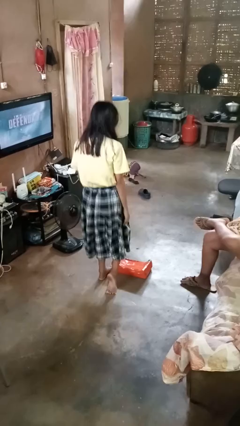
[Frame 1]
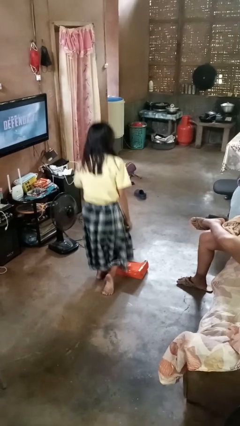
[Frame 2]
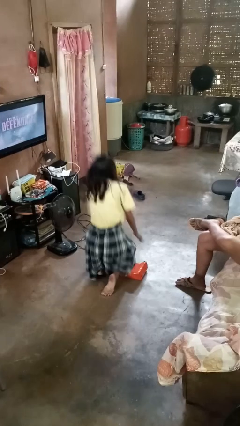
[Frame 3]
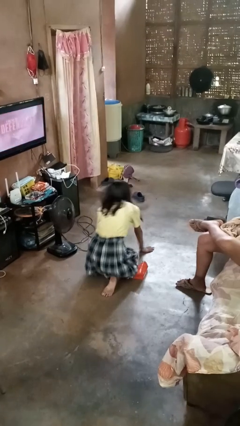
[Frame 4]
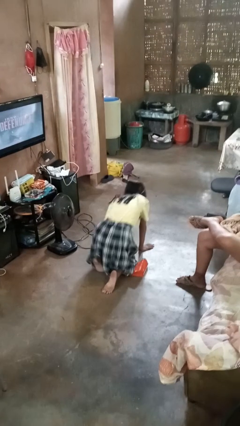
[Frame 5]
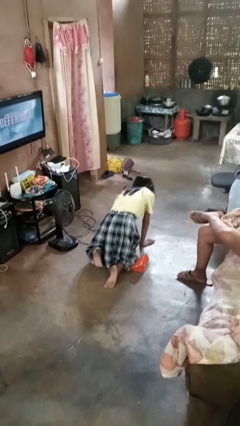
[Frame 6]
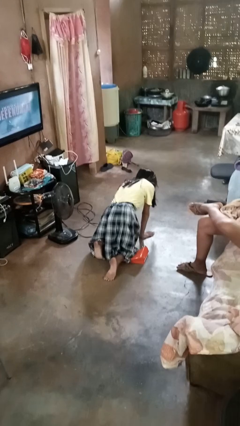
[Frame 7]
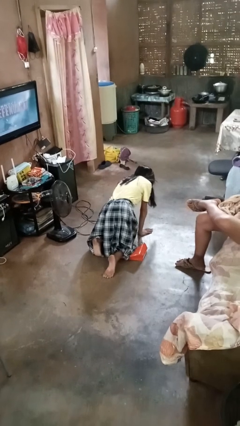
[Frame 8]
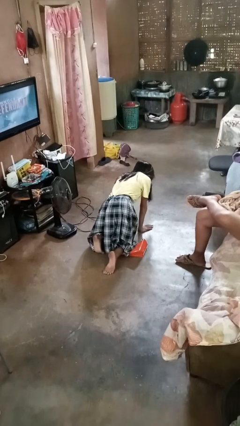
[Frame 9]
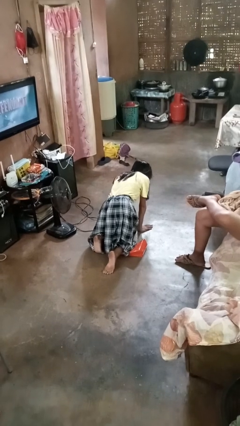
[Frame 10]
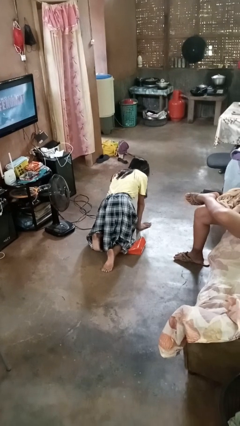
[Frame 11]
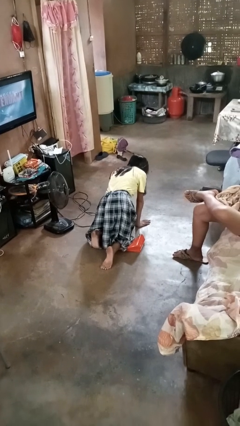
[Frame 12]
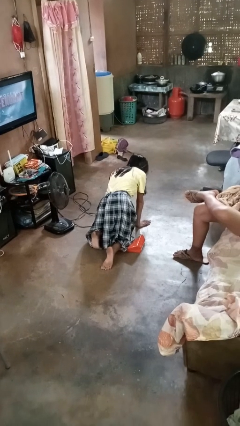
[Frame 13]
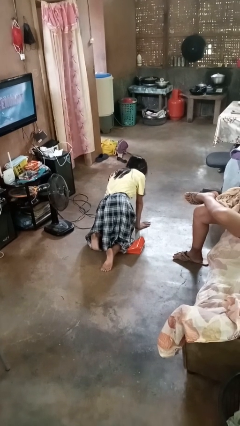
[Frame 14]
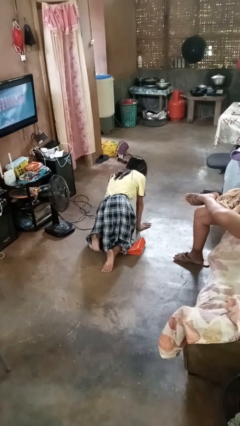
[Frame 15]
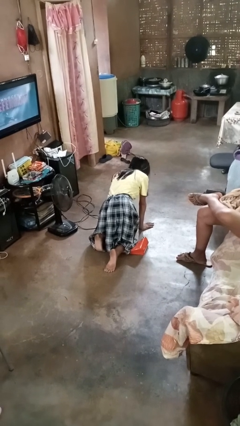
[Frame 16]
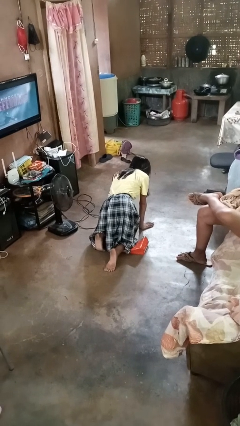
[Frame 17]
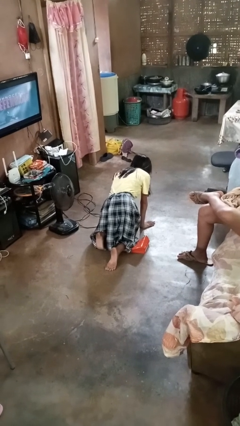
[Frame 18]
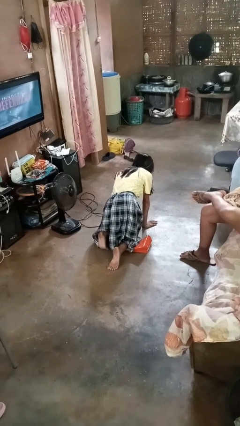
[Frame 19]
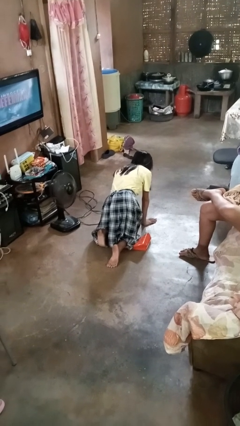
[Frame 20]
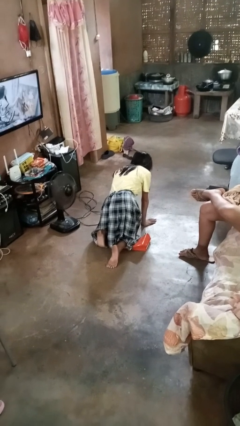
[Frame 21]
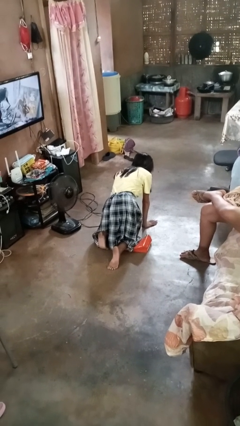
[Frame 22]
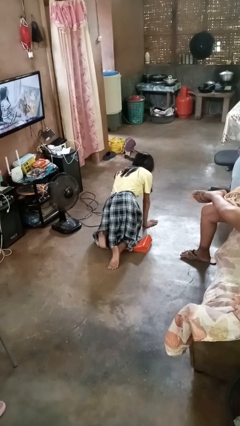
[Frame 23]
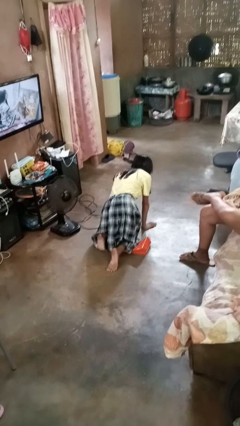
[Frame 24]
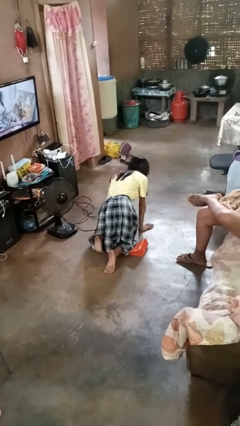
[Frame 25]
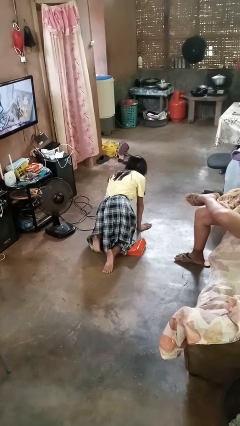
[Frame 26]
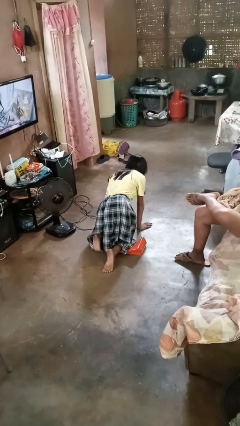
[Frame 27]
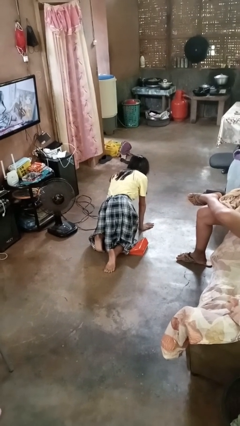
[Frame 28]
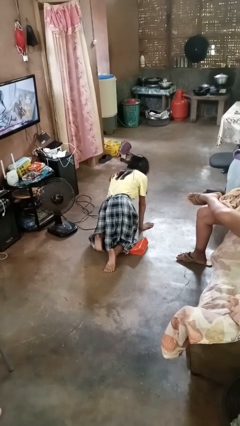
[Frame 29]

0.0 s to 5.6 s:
person trips on object on floor

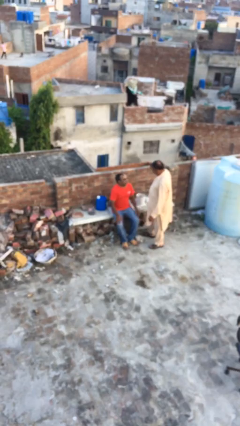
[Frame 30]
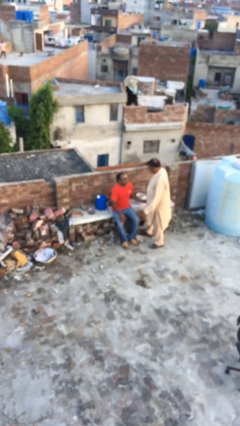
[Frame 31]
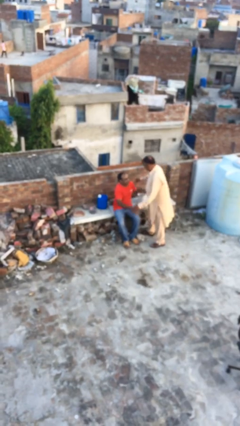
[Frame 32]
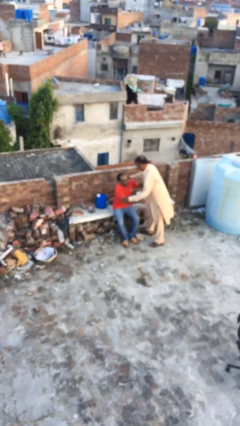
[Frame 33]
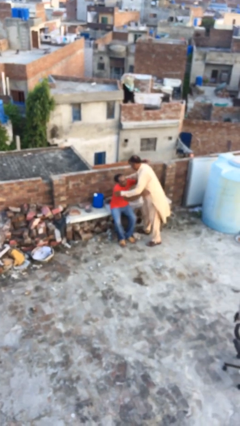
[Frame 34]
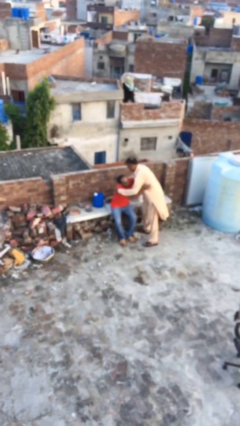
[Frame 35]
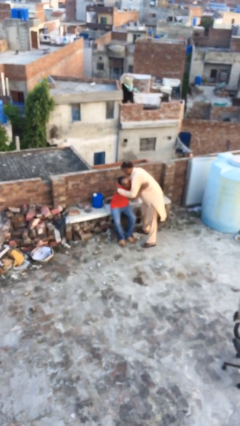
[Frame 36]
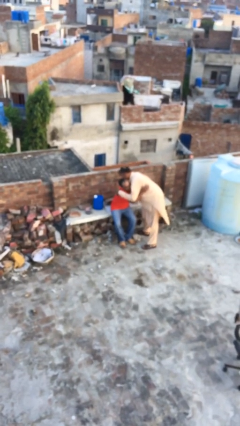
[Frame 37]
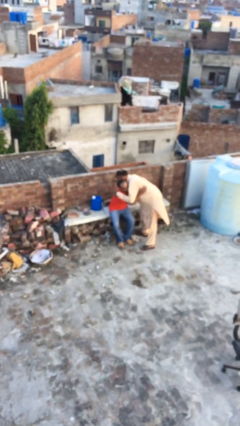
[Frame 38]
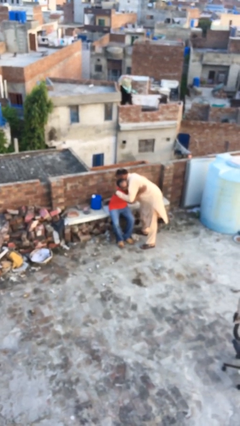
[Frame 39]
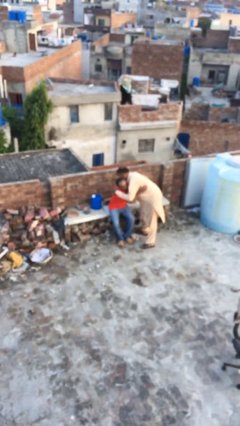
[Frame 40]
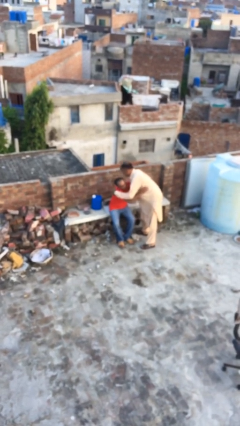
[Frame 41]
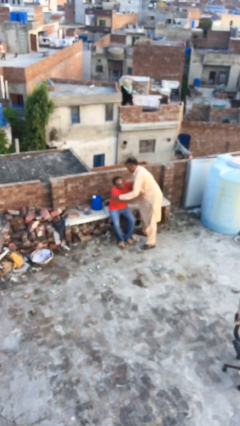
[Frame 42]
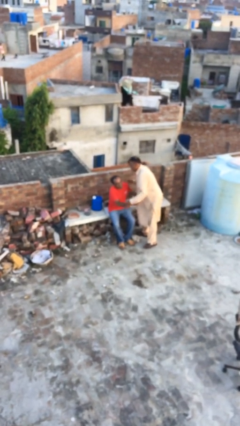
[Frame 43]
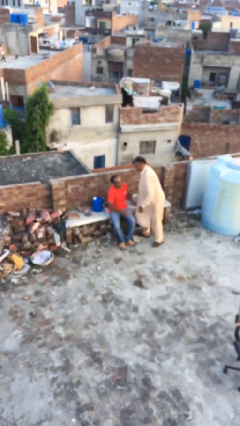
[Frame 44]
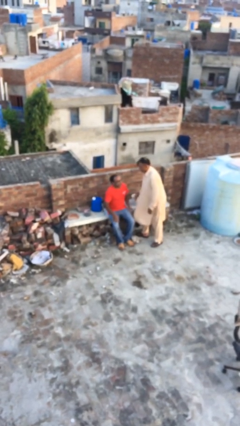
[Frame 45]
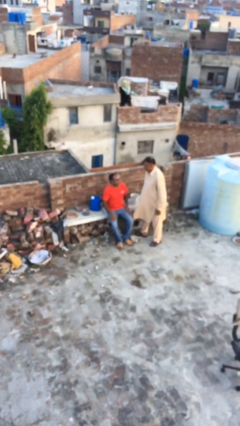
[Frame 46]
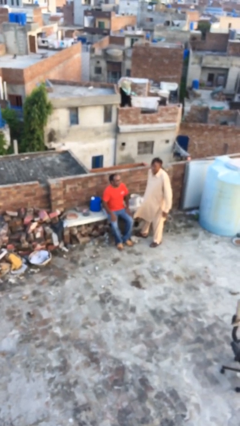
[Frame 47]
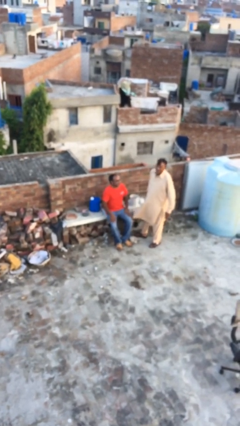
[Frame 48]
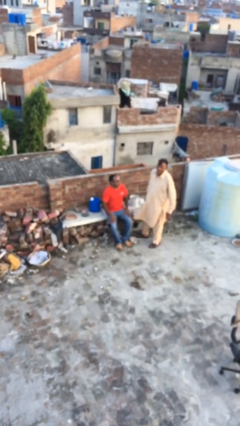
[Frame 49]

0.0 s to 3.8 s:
person embraces person

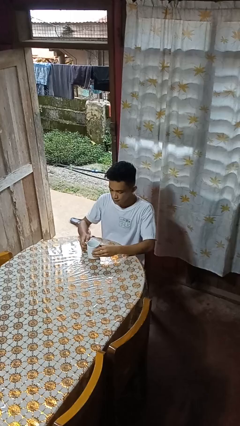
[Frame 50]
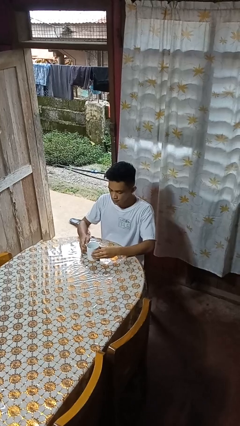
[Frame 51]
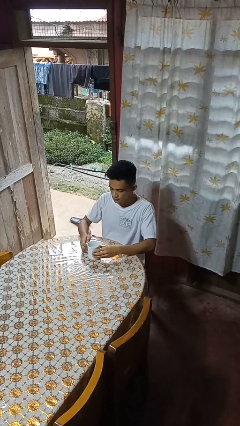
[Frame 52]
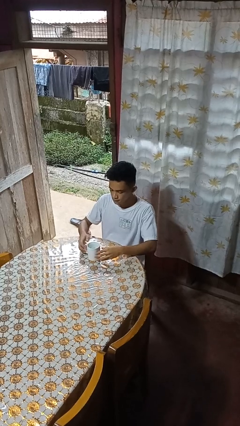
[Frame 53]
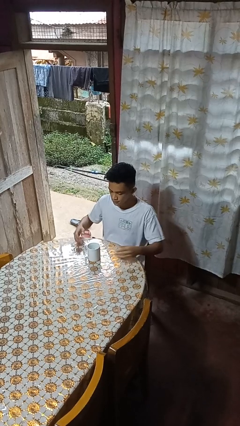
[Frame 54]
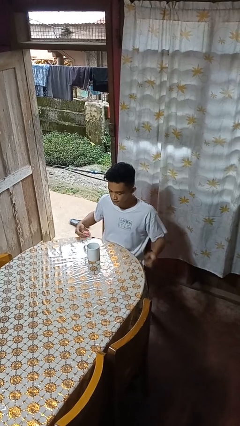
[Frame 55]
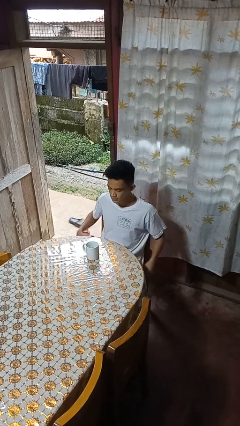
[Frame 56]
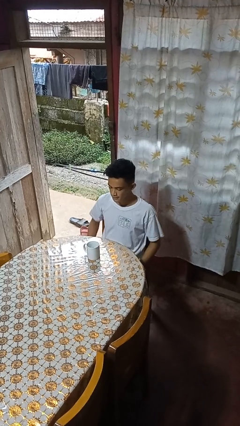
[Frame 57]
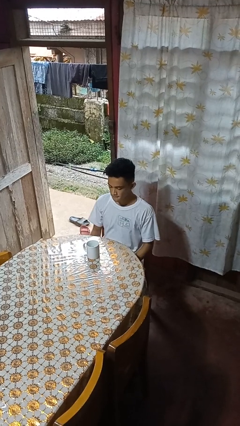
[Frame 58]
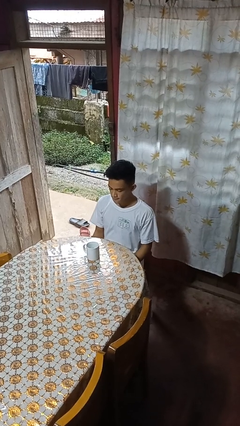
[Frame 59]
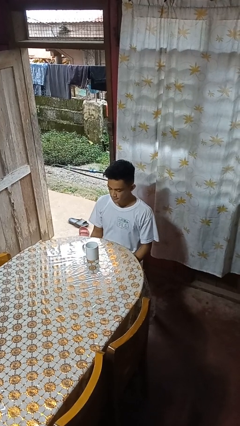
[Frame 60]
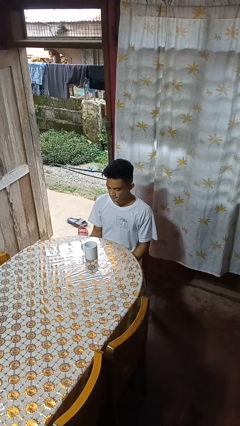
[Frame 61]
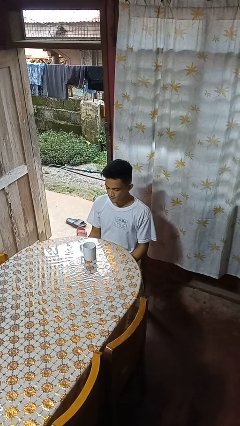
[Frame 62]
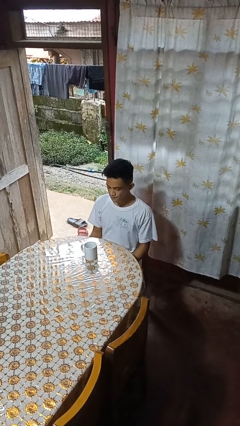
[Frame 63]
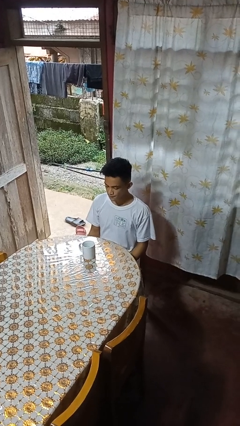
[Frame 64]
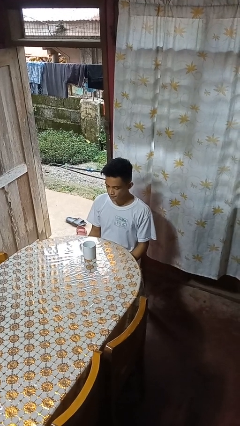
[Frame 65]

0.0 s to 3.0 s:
person puts down object on table

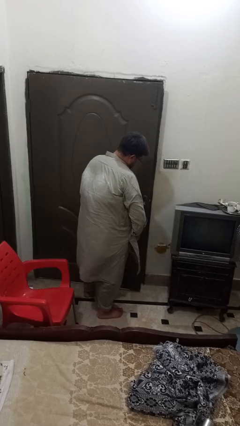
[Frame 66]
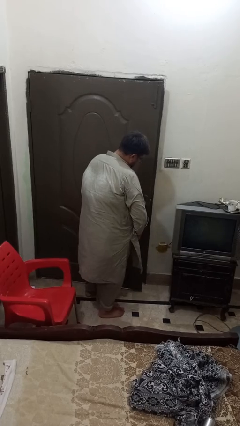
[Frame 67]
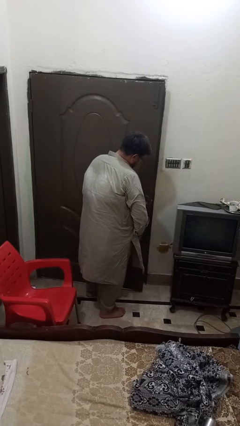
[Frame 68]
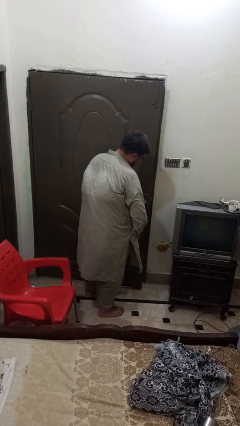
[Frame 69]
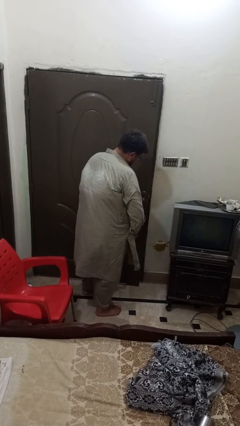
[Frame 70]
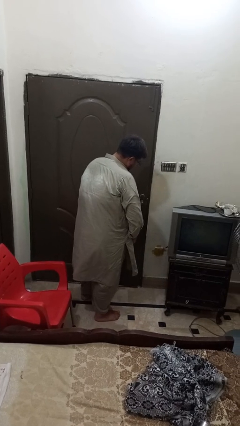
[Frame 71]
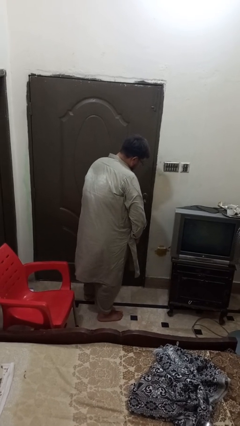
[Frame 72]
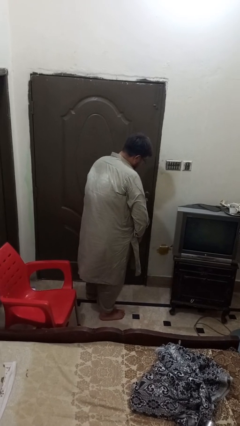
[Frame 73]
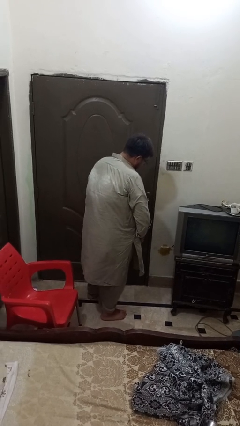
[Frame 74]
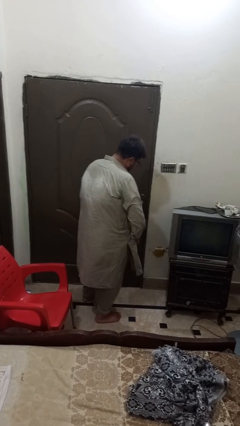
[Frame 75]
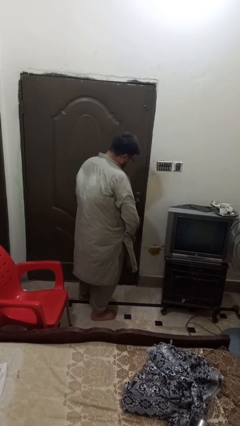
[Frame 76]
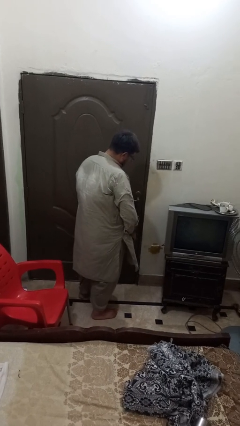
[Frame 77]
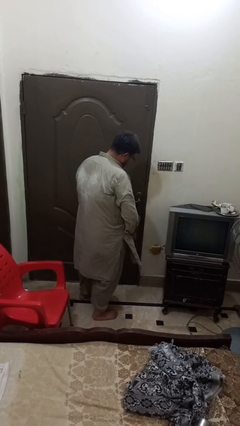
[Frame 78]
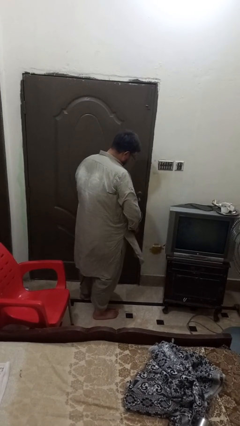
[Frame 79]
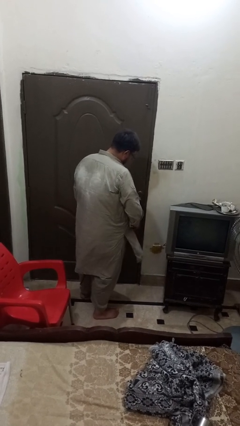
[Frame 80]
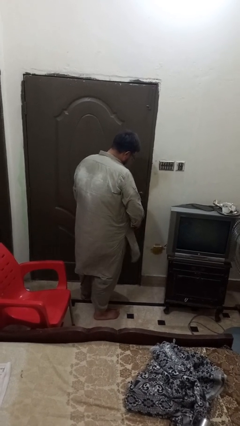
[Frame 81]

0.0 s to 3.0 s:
person closes facility door

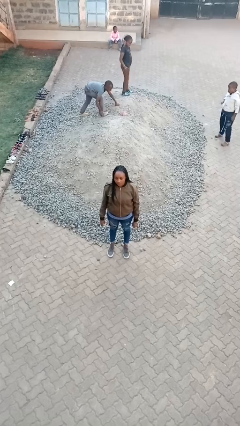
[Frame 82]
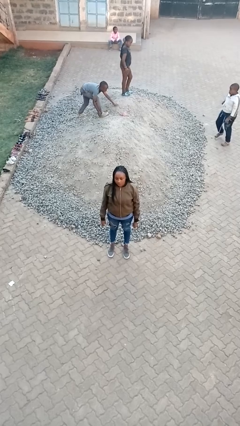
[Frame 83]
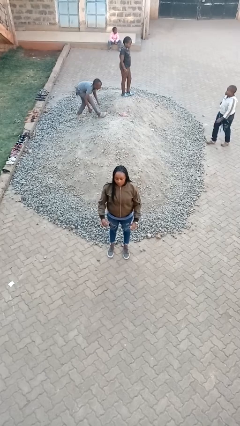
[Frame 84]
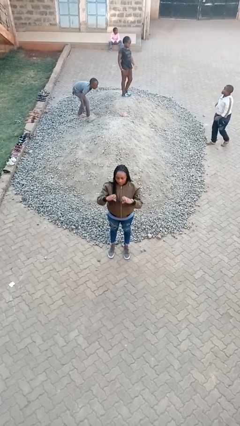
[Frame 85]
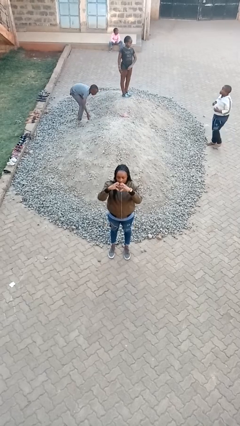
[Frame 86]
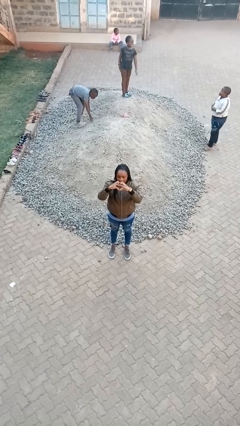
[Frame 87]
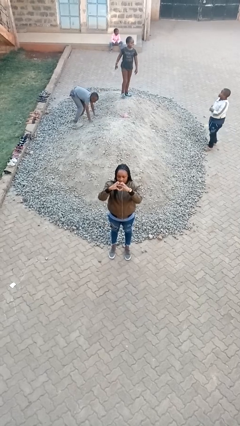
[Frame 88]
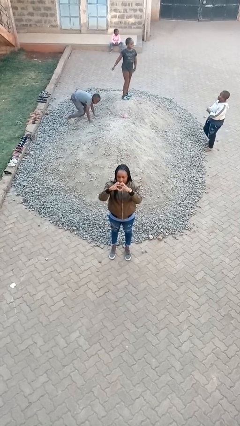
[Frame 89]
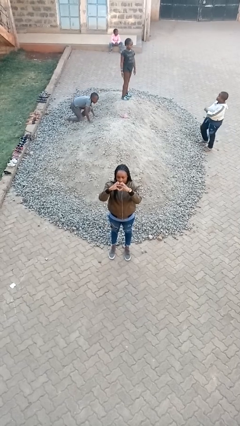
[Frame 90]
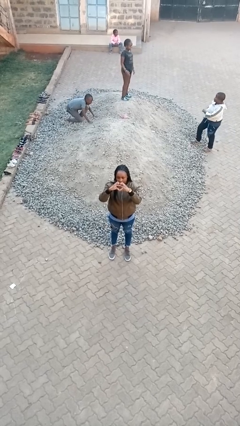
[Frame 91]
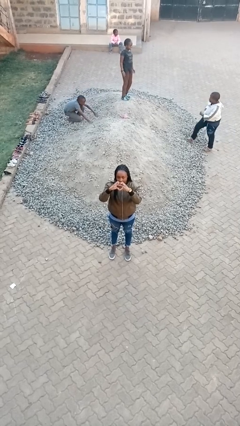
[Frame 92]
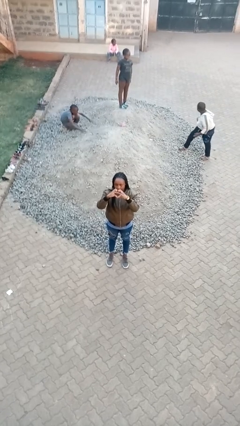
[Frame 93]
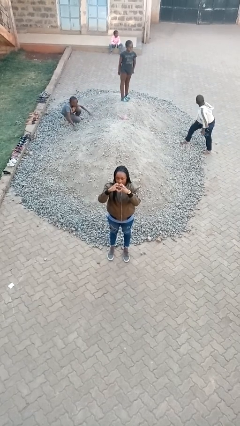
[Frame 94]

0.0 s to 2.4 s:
person gestures heart
